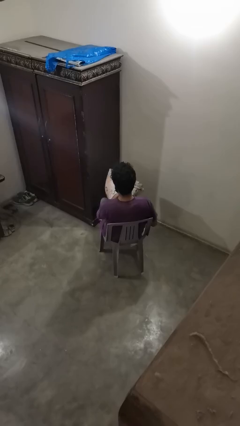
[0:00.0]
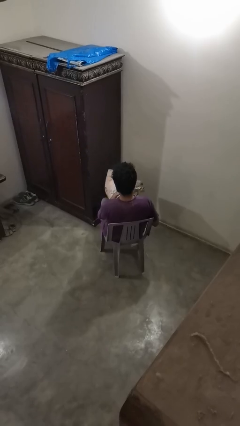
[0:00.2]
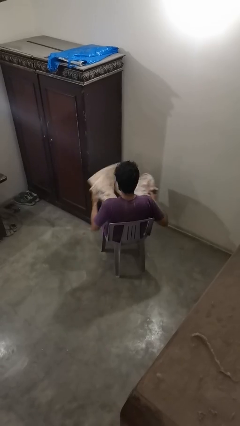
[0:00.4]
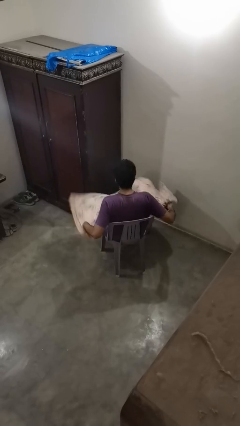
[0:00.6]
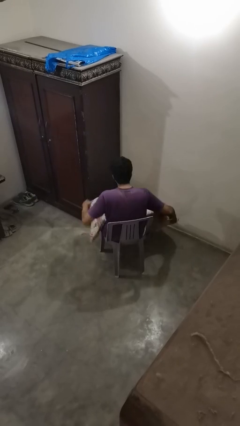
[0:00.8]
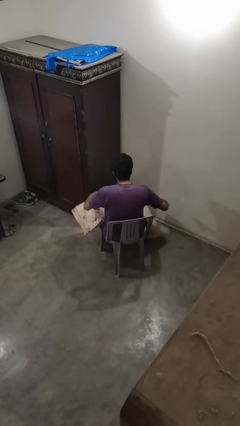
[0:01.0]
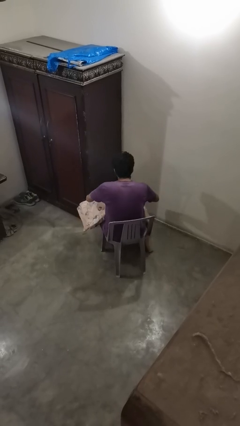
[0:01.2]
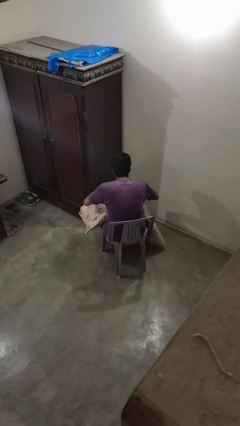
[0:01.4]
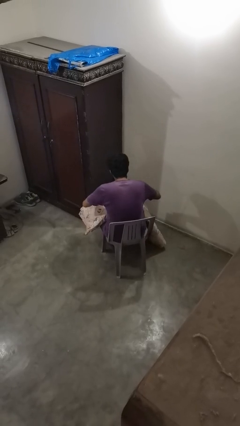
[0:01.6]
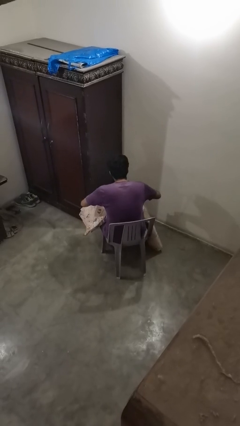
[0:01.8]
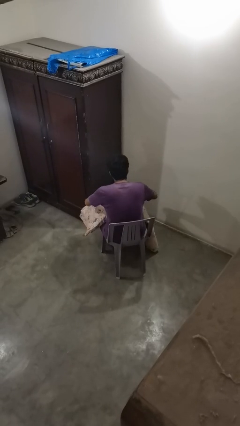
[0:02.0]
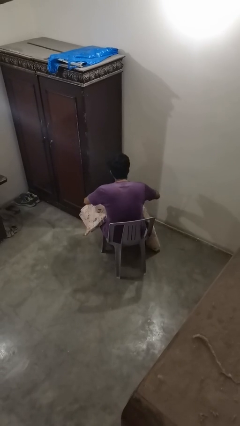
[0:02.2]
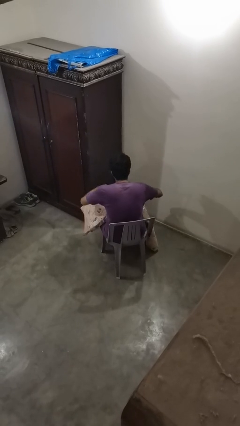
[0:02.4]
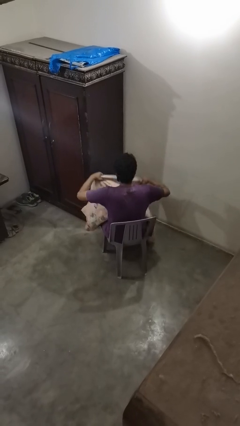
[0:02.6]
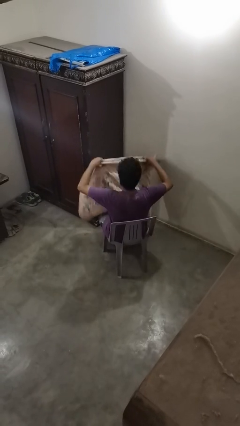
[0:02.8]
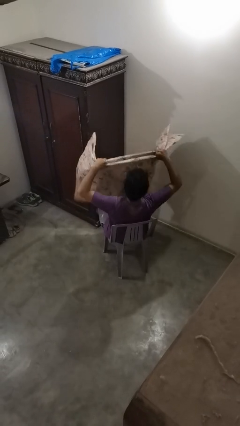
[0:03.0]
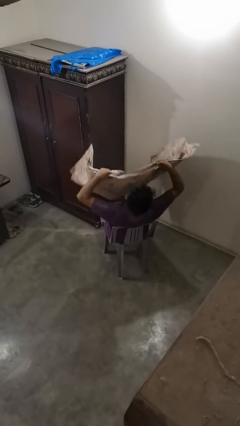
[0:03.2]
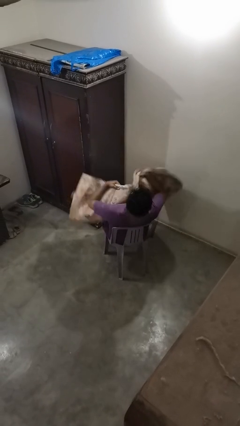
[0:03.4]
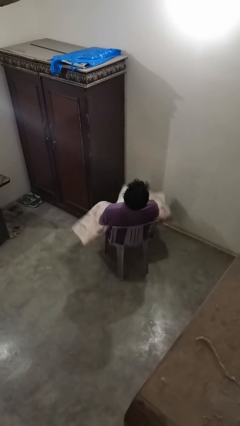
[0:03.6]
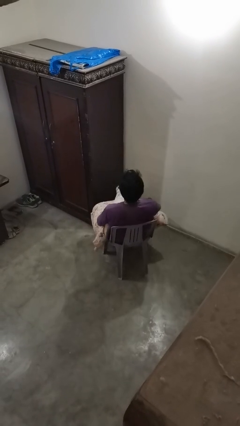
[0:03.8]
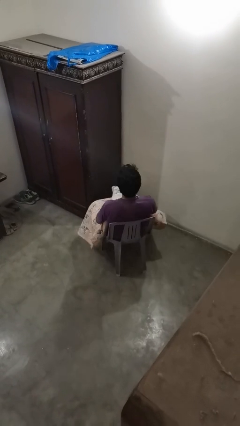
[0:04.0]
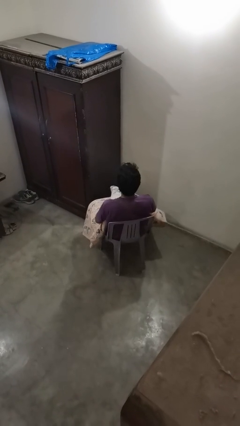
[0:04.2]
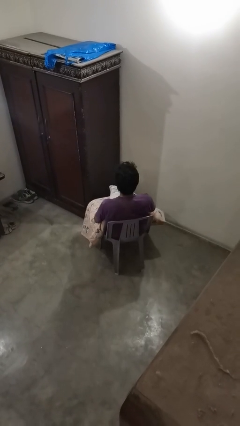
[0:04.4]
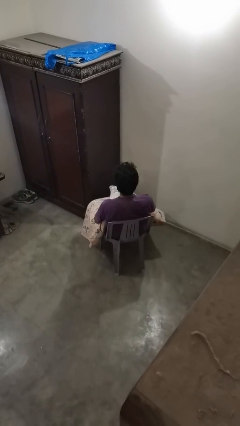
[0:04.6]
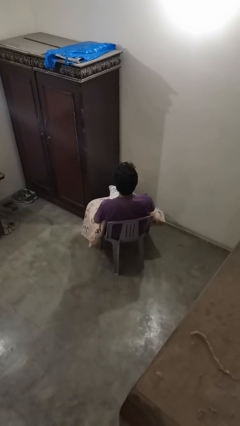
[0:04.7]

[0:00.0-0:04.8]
person unfolds blanket

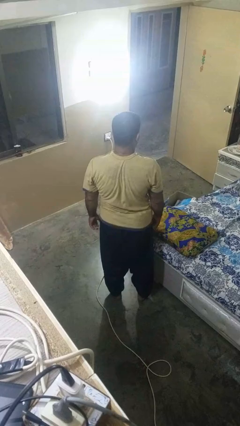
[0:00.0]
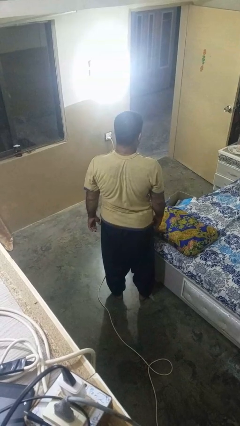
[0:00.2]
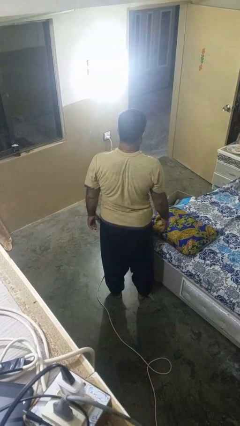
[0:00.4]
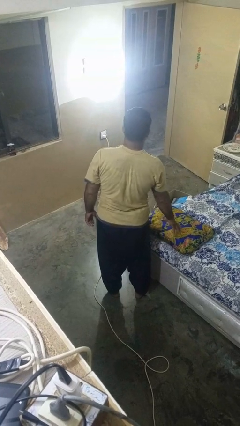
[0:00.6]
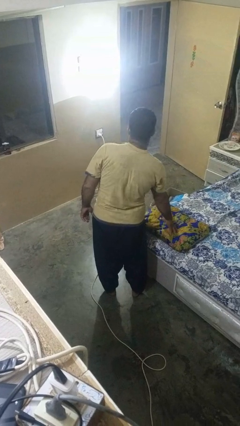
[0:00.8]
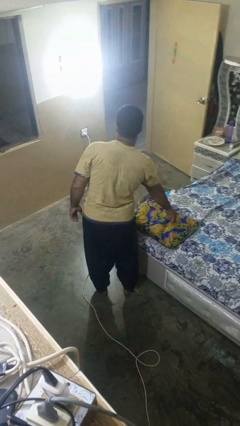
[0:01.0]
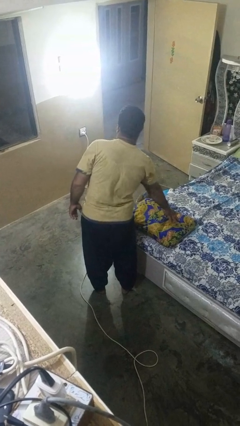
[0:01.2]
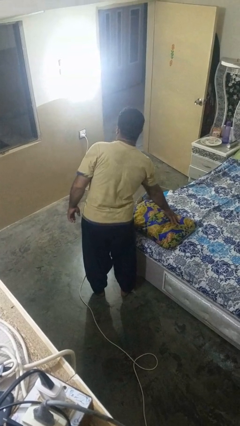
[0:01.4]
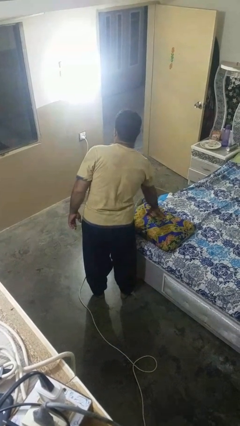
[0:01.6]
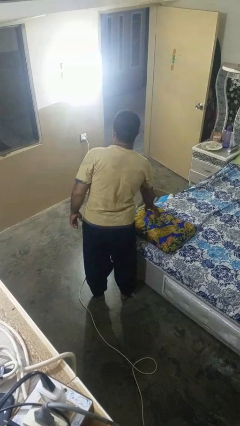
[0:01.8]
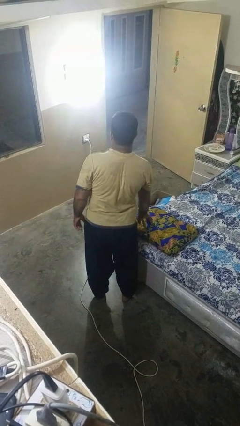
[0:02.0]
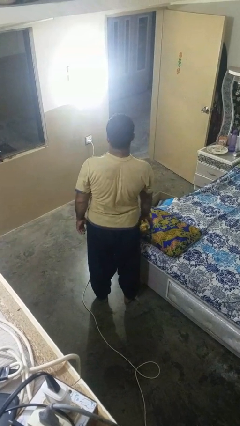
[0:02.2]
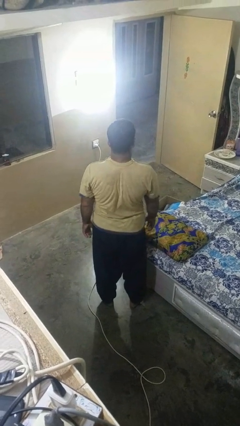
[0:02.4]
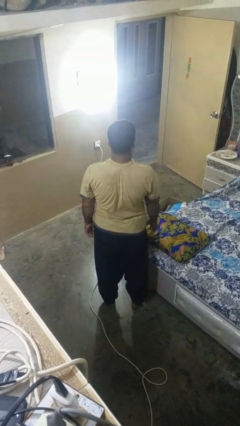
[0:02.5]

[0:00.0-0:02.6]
person taps object with finger

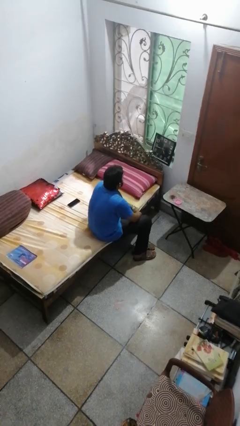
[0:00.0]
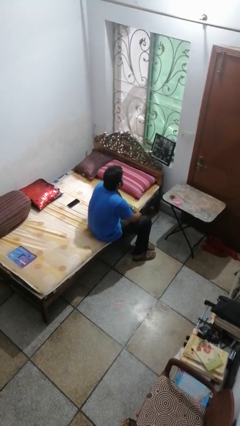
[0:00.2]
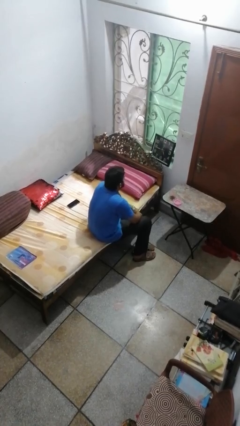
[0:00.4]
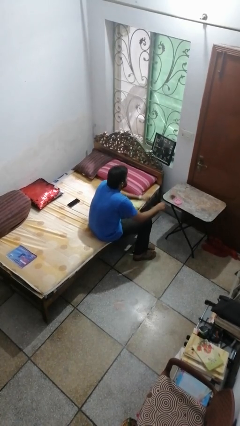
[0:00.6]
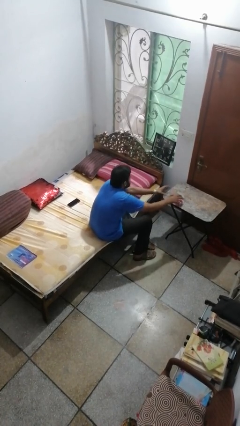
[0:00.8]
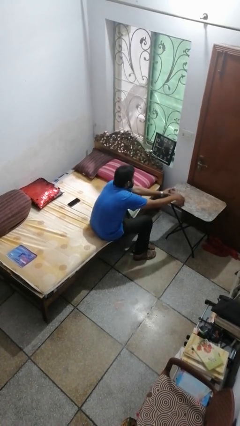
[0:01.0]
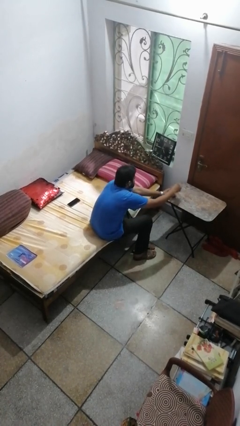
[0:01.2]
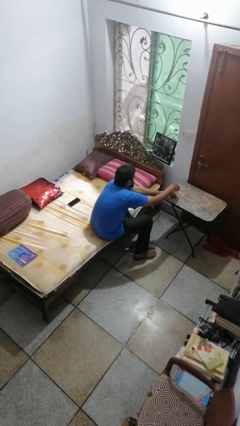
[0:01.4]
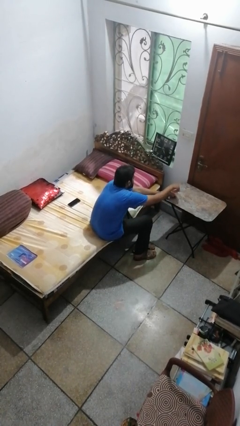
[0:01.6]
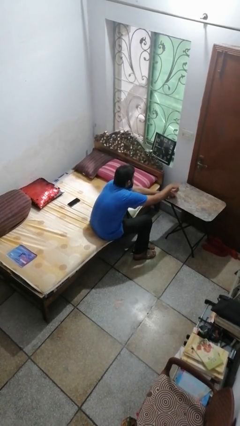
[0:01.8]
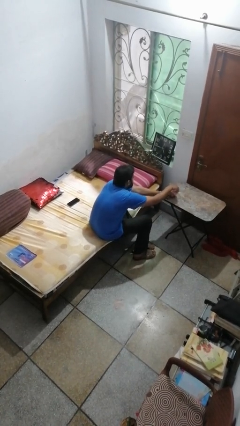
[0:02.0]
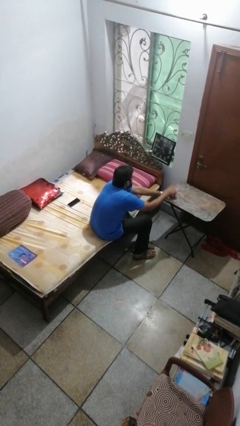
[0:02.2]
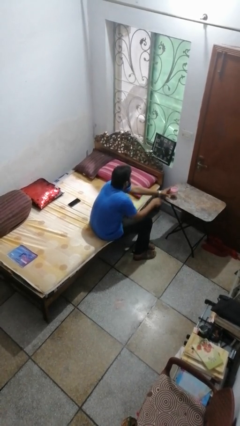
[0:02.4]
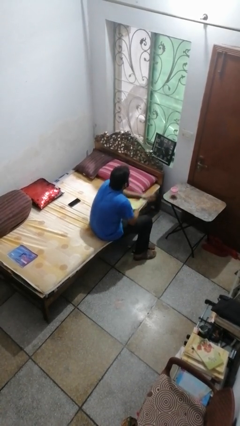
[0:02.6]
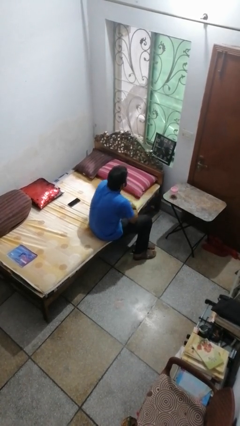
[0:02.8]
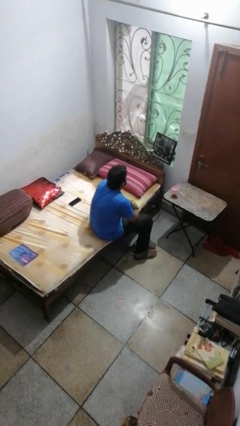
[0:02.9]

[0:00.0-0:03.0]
person closes jar

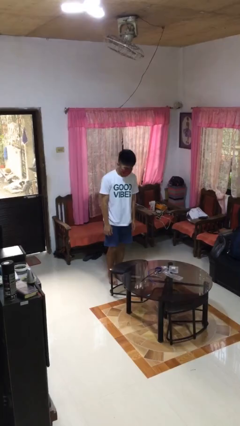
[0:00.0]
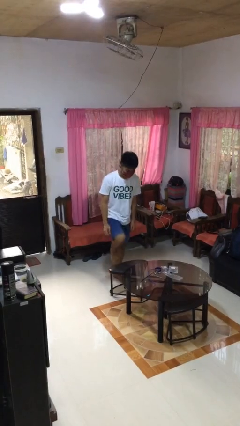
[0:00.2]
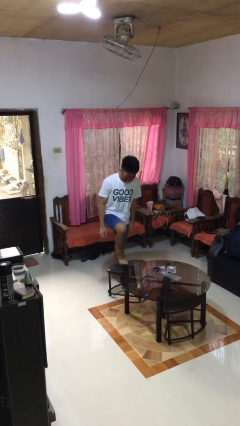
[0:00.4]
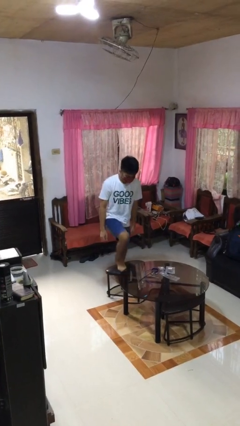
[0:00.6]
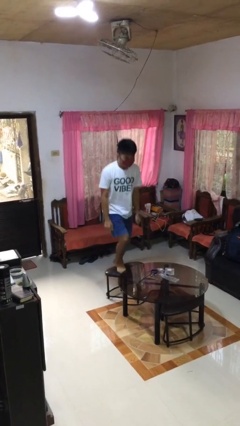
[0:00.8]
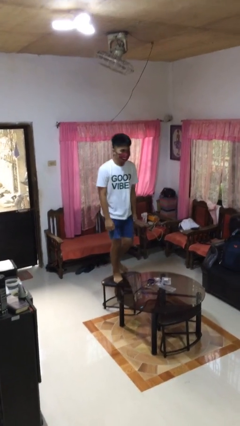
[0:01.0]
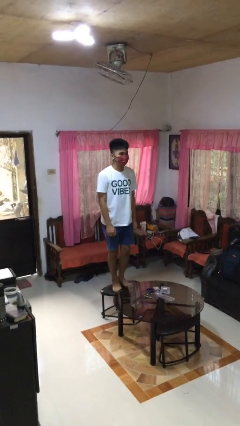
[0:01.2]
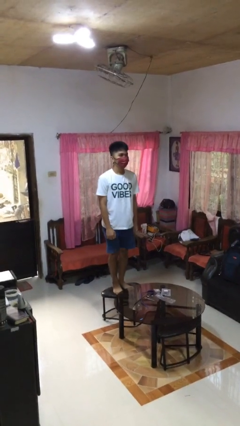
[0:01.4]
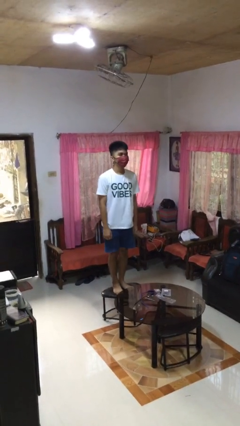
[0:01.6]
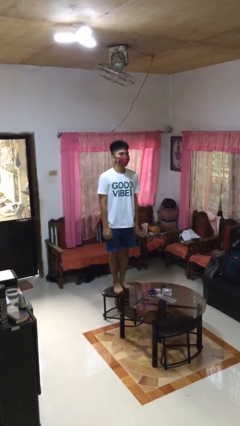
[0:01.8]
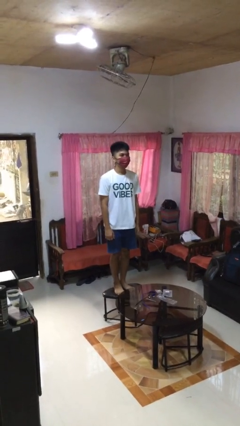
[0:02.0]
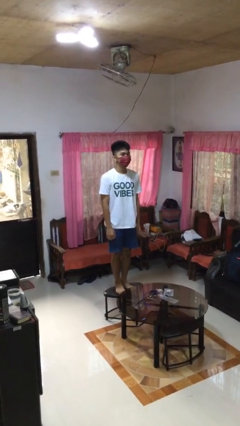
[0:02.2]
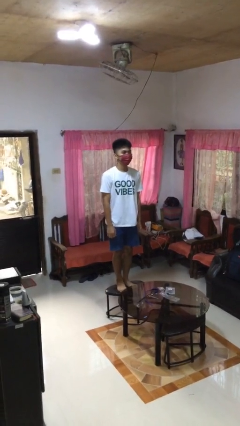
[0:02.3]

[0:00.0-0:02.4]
person climbs on chair

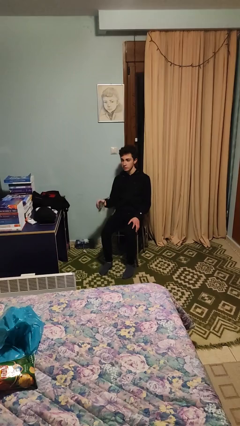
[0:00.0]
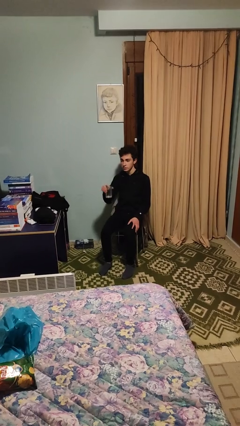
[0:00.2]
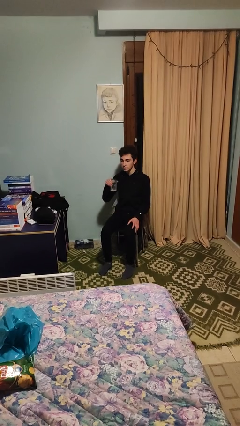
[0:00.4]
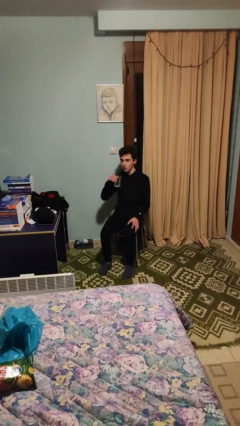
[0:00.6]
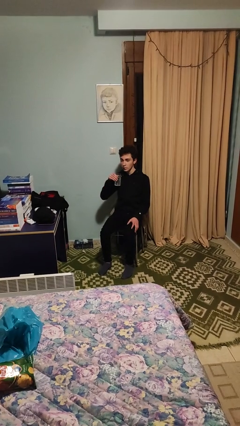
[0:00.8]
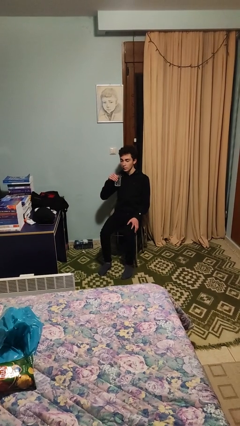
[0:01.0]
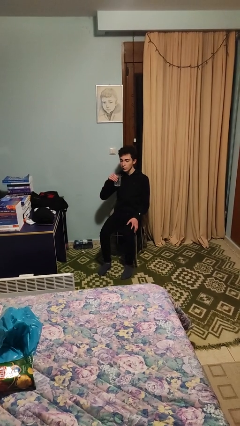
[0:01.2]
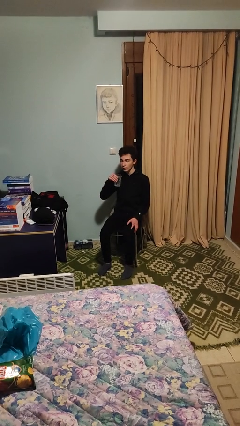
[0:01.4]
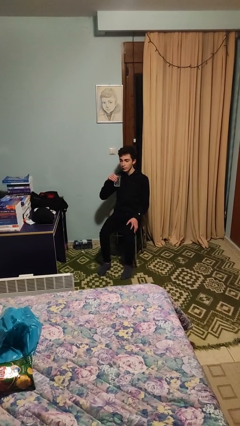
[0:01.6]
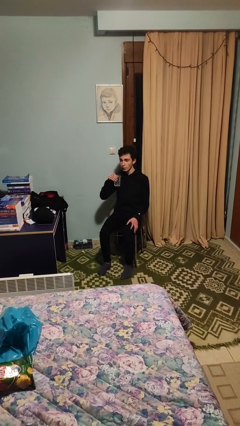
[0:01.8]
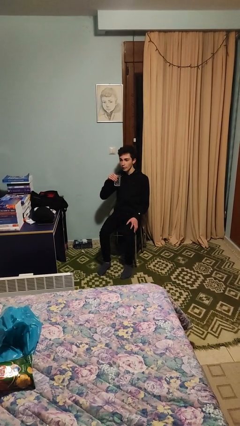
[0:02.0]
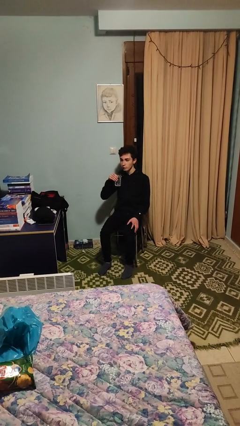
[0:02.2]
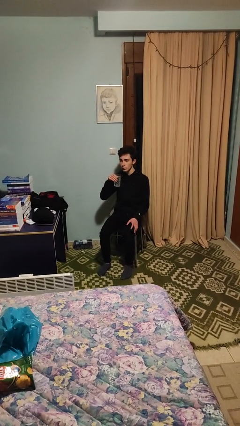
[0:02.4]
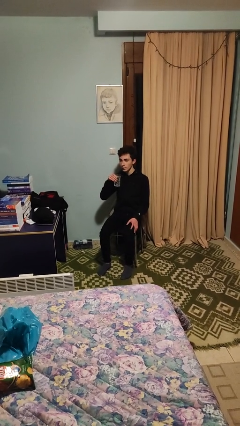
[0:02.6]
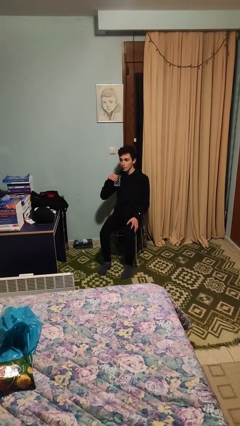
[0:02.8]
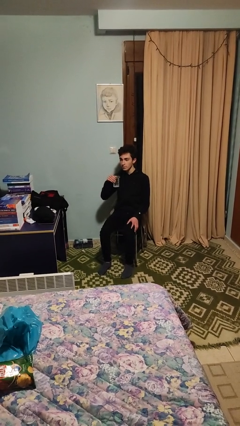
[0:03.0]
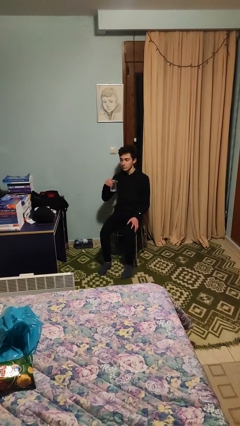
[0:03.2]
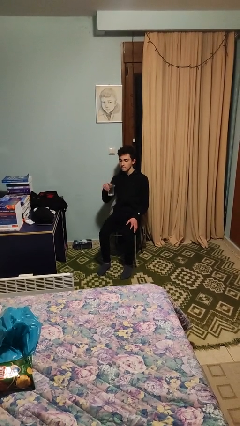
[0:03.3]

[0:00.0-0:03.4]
person drinks from straw

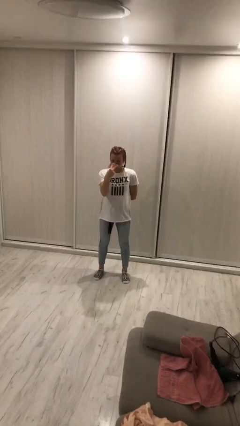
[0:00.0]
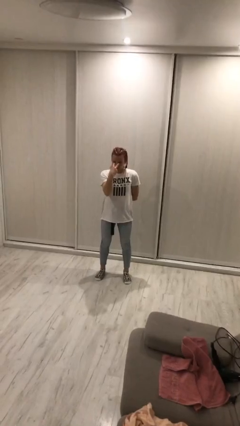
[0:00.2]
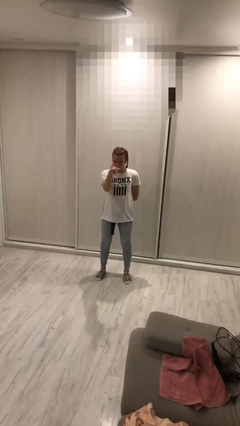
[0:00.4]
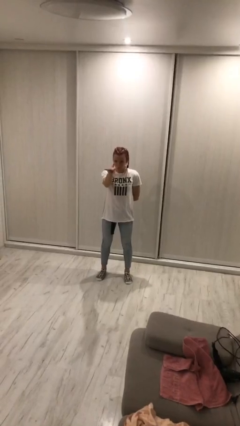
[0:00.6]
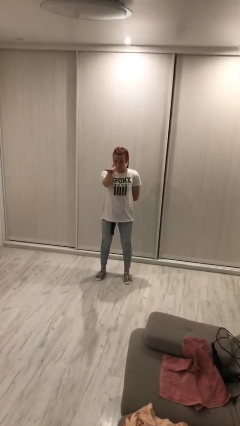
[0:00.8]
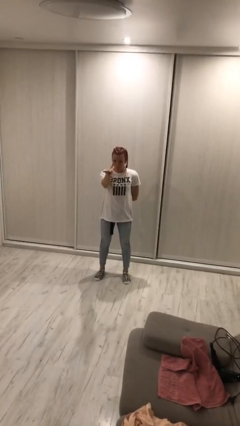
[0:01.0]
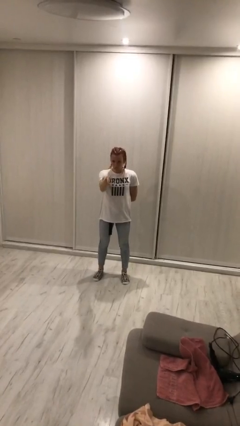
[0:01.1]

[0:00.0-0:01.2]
person gestures watch closely

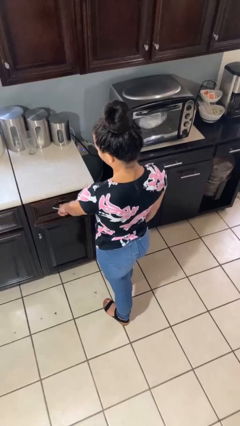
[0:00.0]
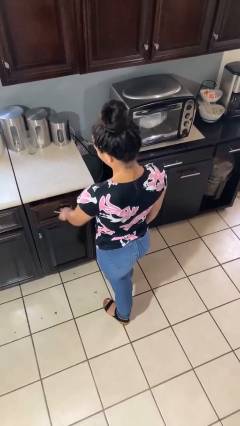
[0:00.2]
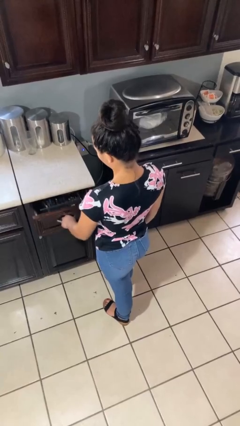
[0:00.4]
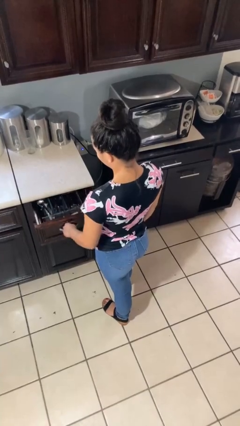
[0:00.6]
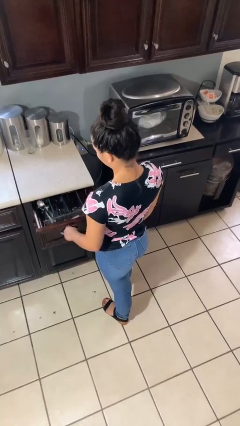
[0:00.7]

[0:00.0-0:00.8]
person opens kitchen drawer
